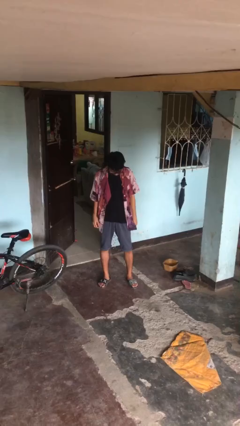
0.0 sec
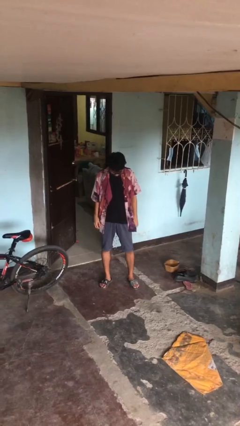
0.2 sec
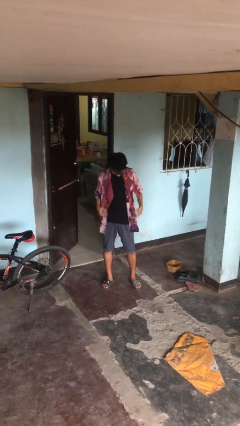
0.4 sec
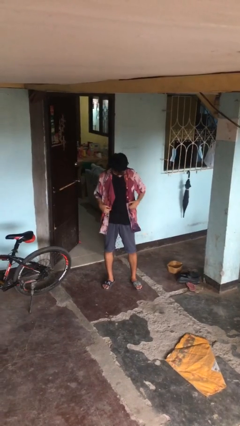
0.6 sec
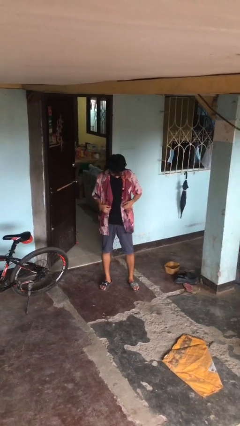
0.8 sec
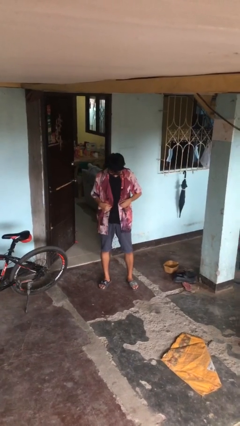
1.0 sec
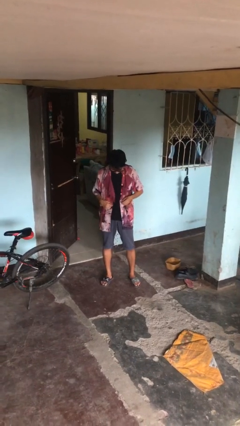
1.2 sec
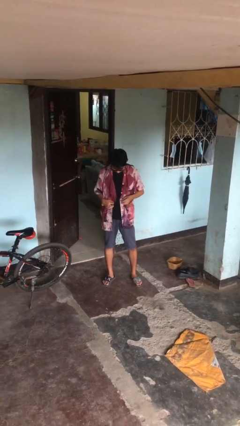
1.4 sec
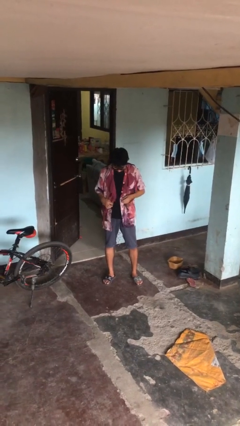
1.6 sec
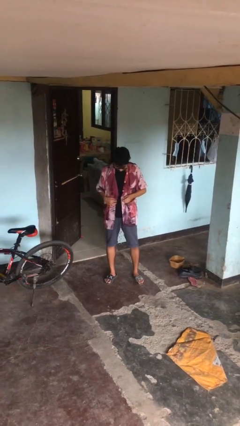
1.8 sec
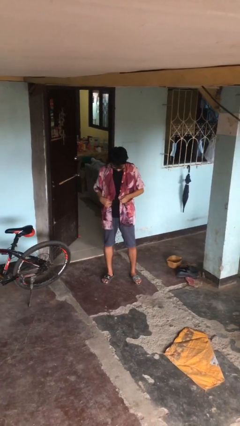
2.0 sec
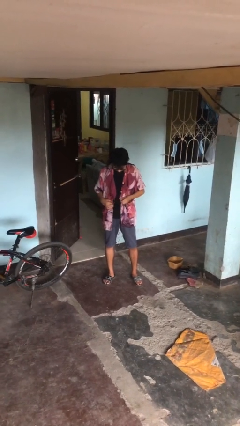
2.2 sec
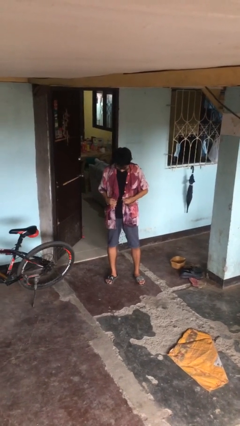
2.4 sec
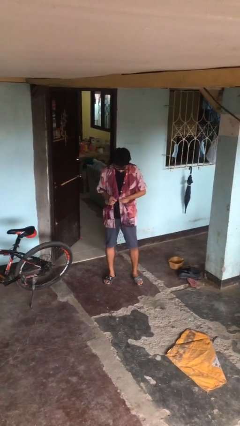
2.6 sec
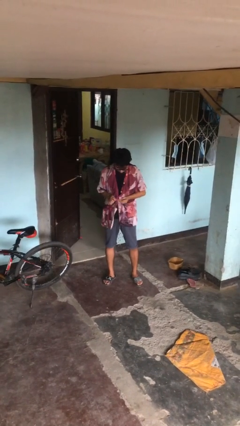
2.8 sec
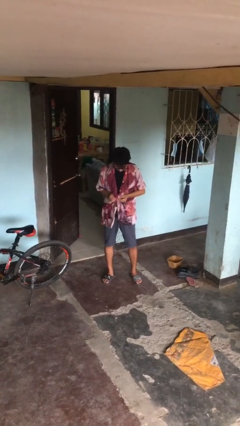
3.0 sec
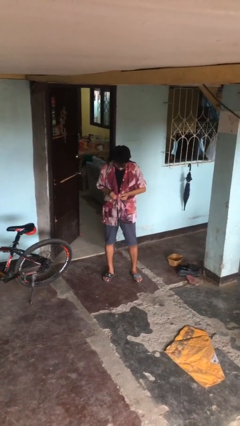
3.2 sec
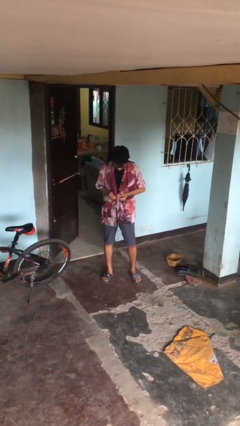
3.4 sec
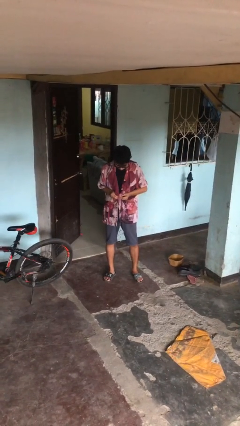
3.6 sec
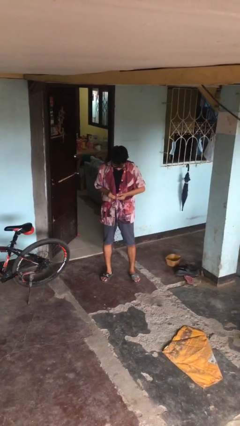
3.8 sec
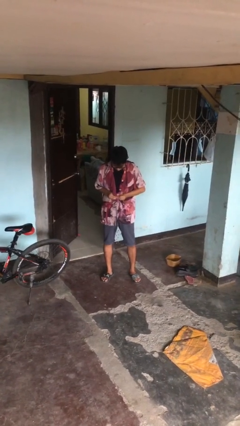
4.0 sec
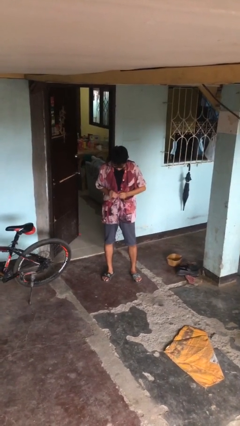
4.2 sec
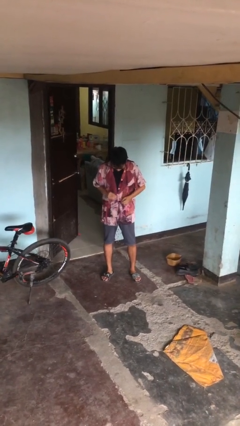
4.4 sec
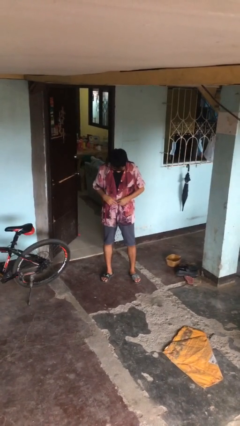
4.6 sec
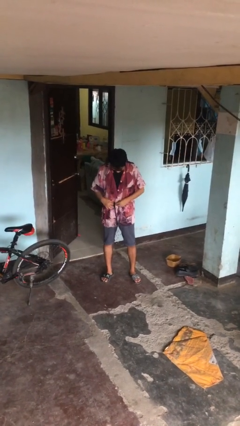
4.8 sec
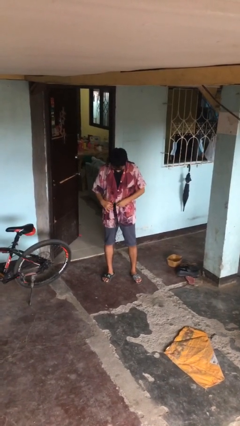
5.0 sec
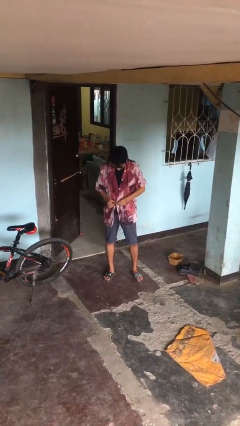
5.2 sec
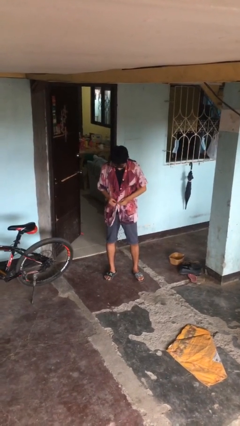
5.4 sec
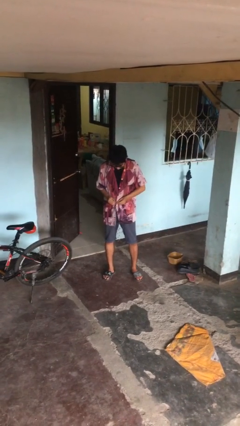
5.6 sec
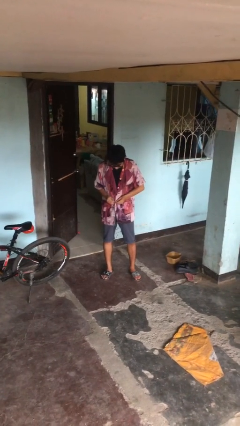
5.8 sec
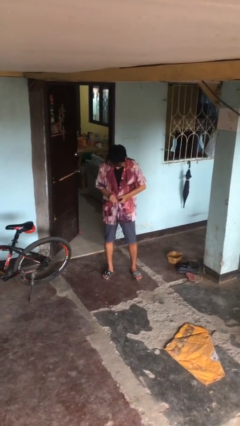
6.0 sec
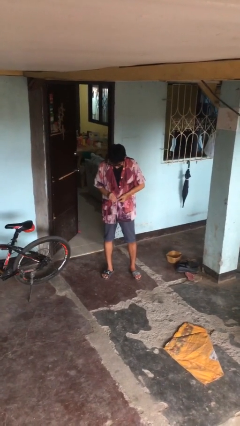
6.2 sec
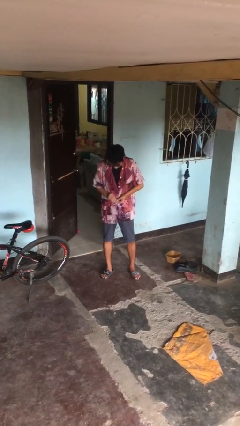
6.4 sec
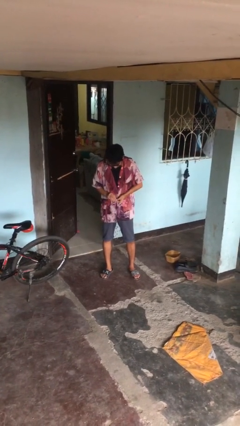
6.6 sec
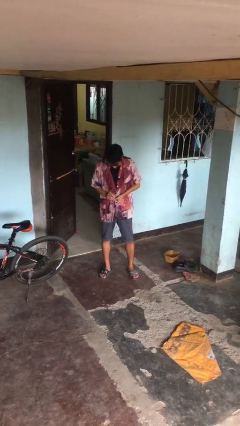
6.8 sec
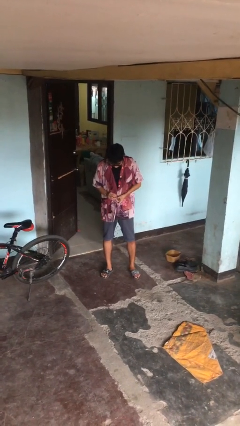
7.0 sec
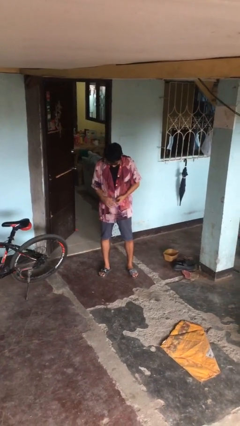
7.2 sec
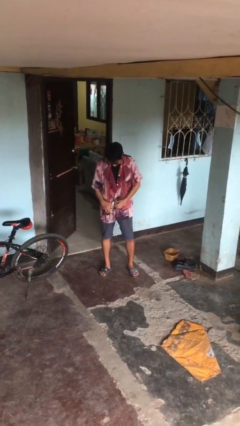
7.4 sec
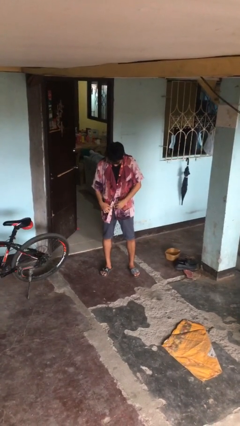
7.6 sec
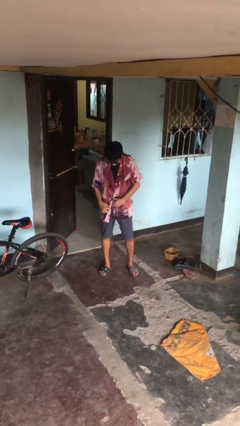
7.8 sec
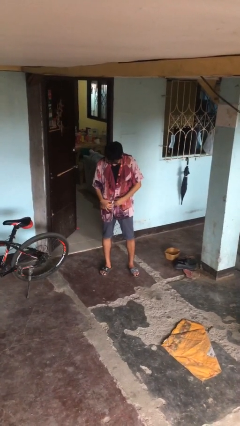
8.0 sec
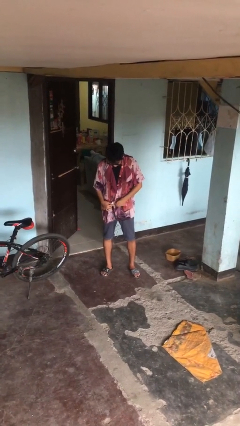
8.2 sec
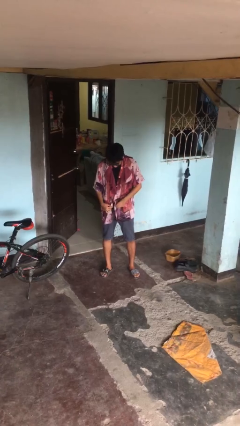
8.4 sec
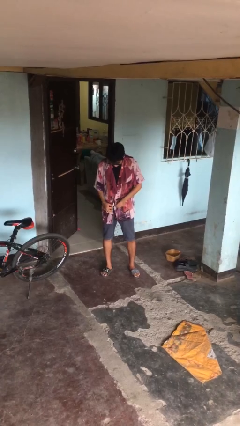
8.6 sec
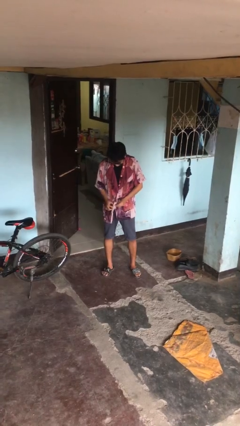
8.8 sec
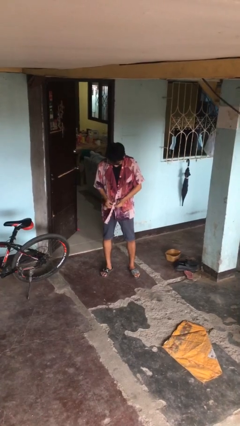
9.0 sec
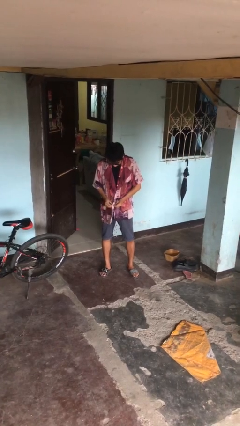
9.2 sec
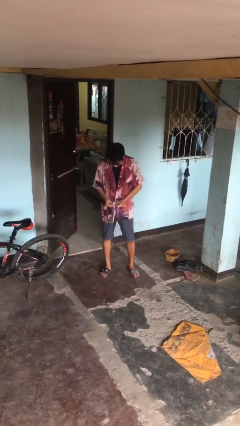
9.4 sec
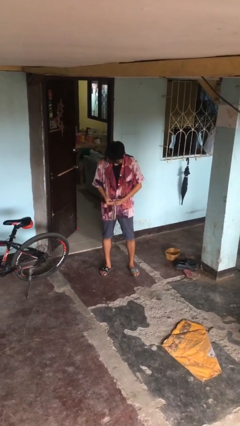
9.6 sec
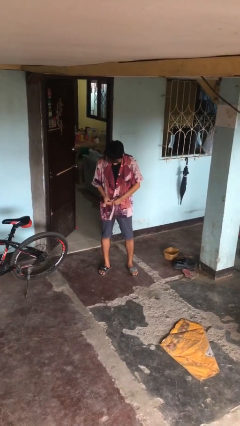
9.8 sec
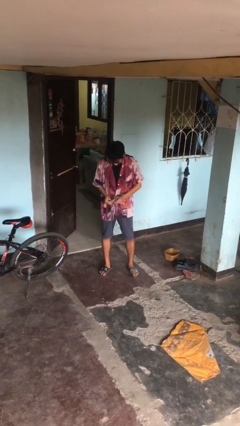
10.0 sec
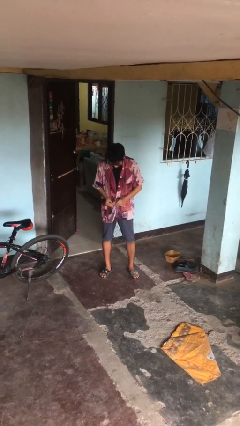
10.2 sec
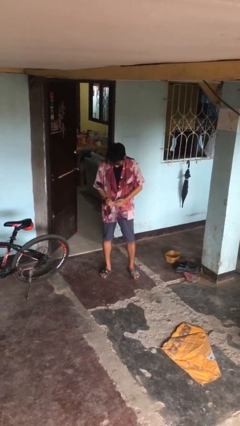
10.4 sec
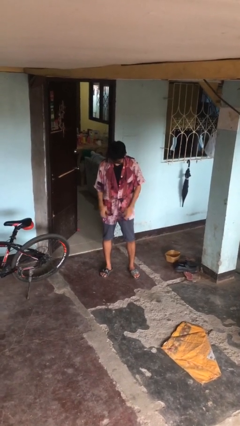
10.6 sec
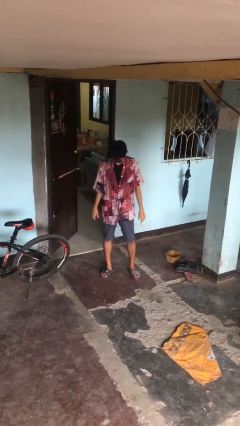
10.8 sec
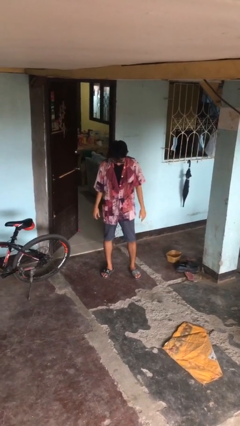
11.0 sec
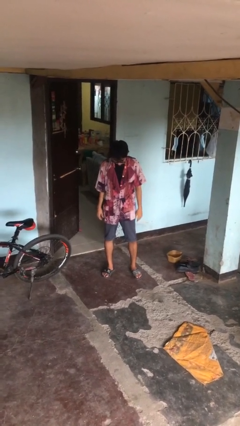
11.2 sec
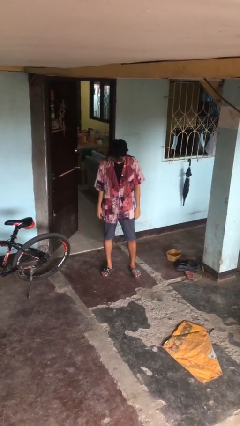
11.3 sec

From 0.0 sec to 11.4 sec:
person buttons shirt

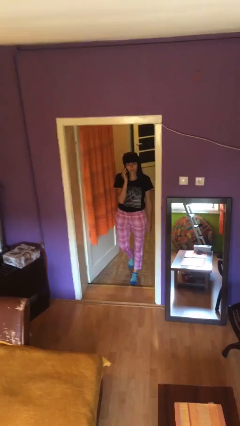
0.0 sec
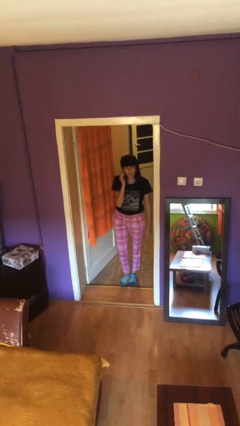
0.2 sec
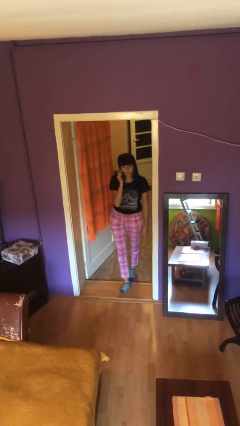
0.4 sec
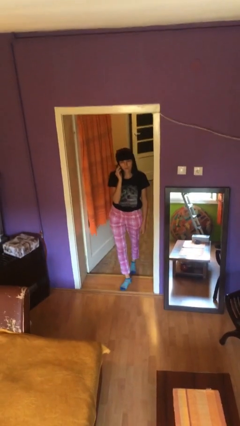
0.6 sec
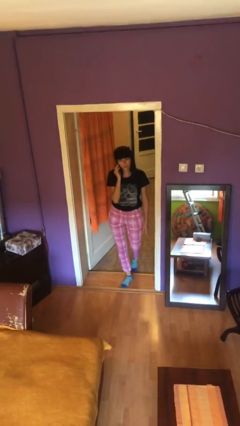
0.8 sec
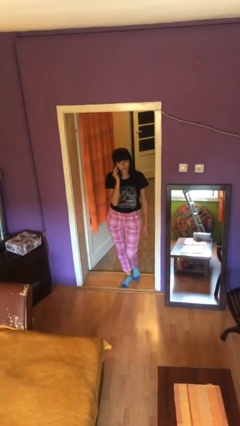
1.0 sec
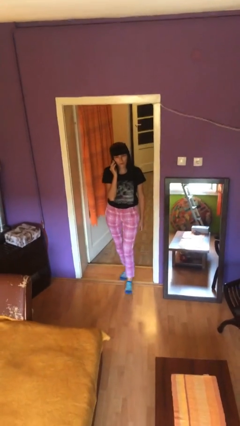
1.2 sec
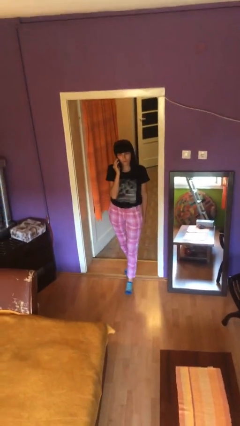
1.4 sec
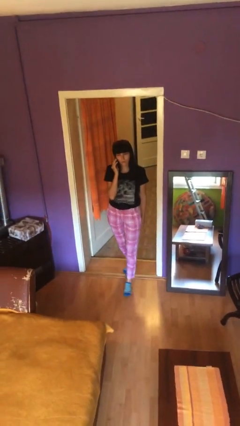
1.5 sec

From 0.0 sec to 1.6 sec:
person enters scene through structure

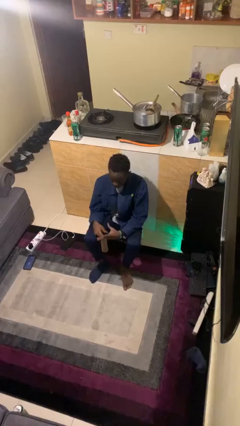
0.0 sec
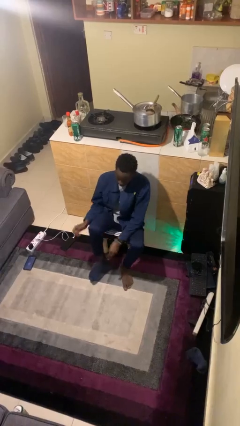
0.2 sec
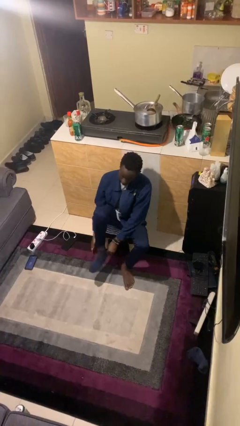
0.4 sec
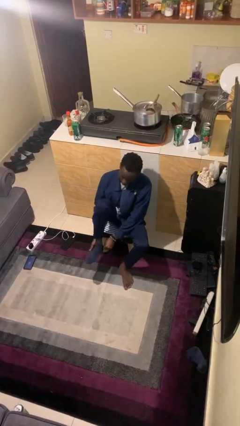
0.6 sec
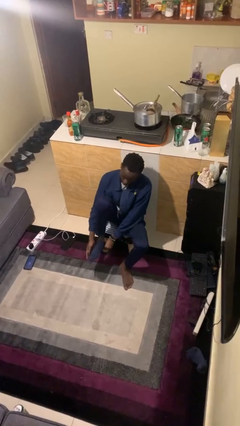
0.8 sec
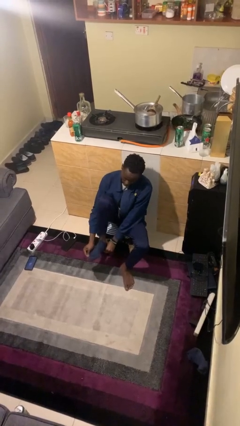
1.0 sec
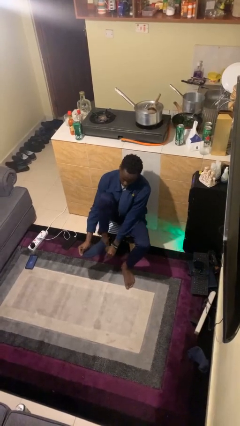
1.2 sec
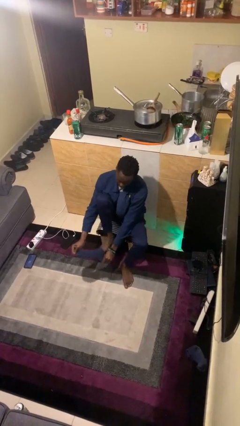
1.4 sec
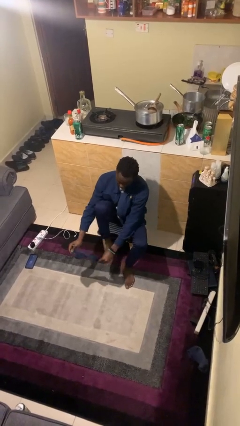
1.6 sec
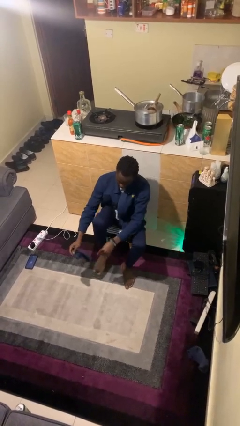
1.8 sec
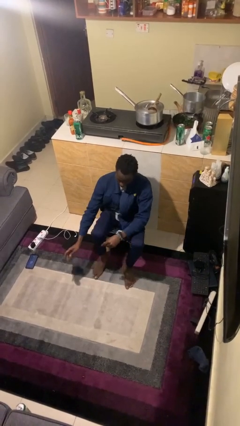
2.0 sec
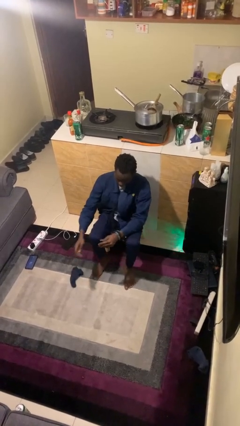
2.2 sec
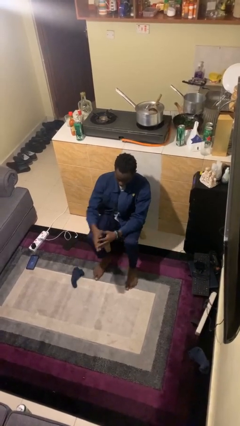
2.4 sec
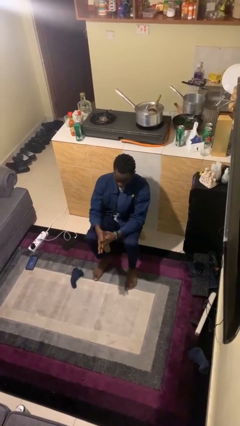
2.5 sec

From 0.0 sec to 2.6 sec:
person takes off socks

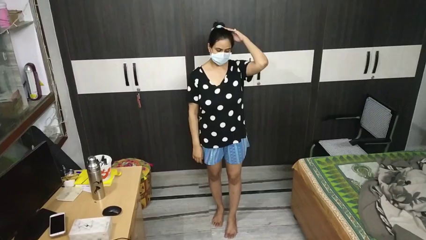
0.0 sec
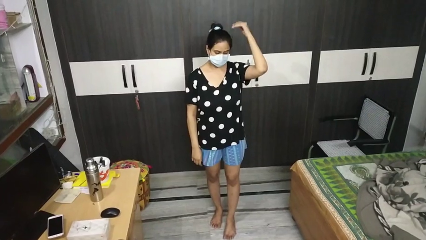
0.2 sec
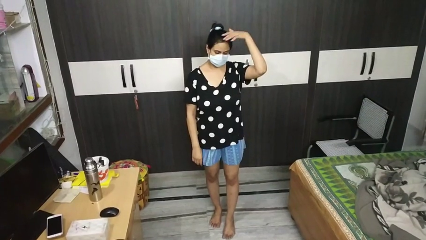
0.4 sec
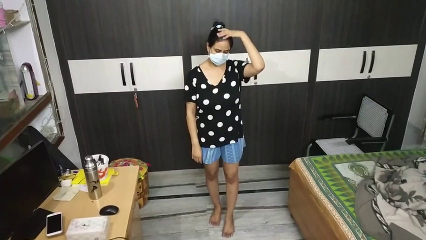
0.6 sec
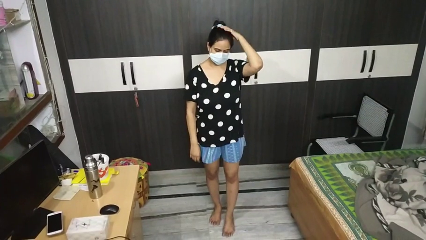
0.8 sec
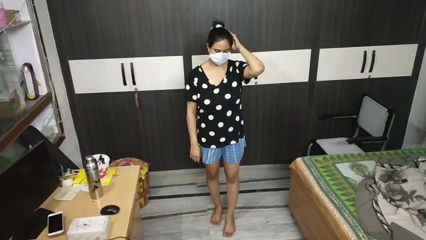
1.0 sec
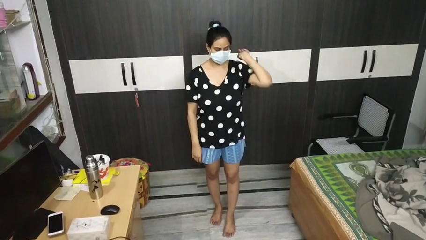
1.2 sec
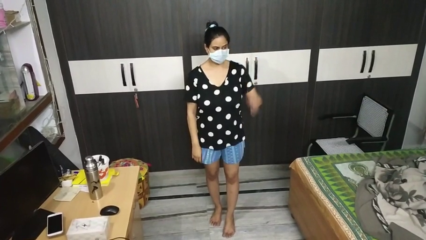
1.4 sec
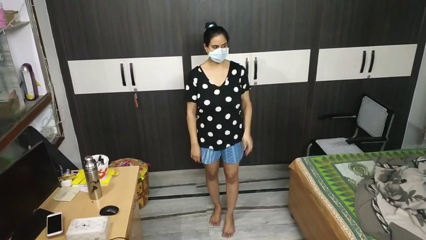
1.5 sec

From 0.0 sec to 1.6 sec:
person pats head

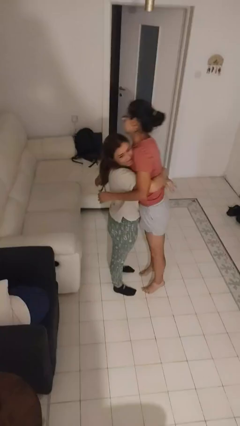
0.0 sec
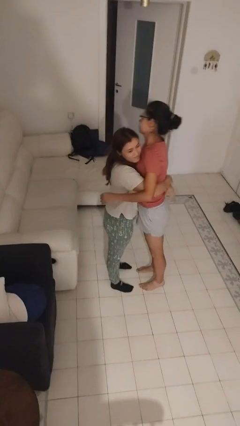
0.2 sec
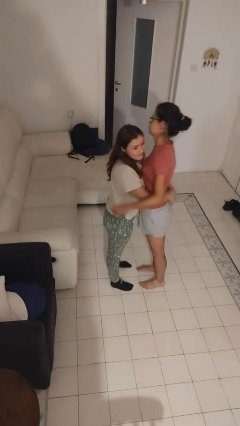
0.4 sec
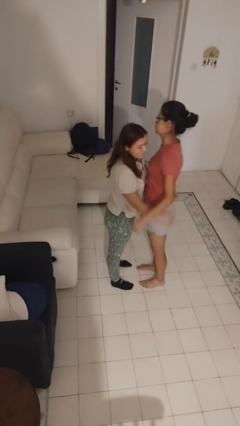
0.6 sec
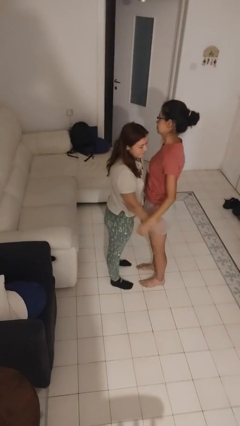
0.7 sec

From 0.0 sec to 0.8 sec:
person puts down person
